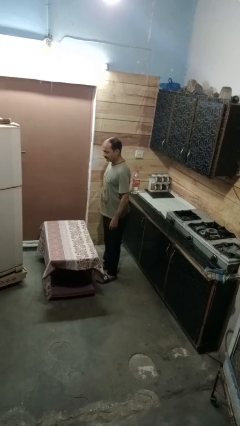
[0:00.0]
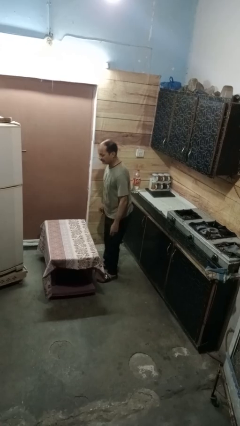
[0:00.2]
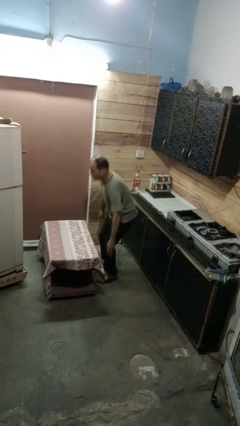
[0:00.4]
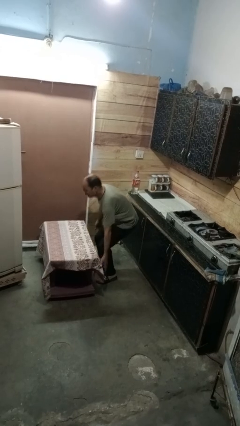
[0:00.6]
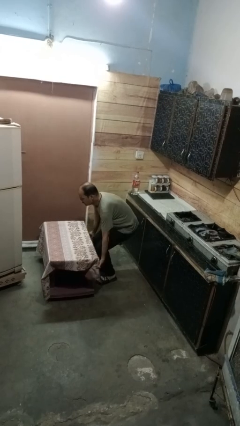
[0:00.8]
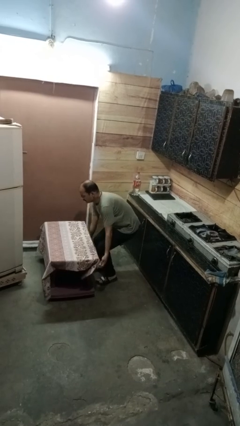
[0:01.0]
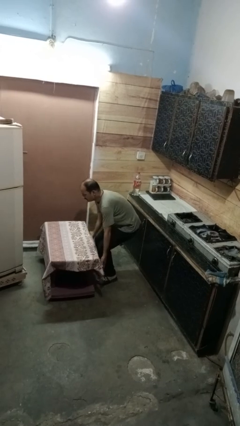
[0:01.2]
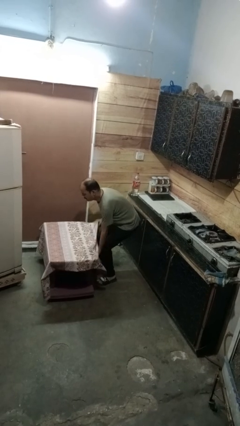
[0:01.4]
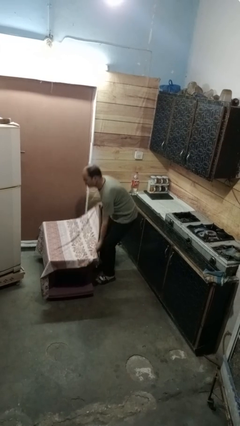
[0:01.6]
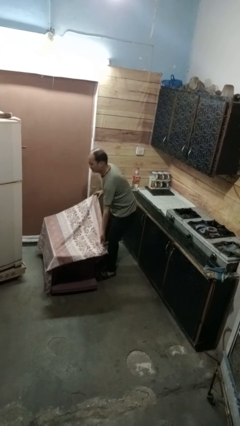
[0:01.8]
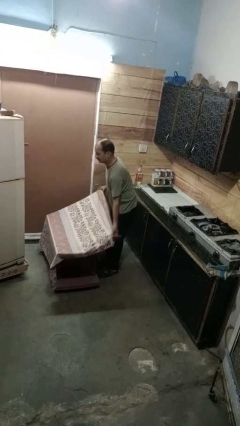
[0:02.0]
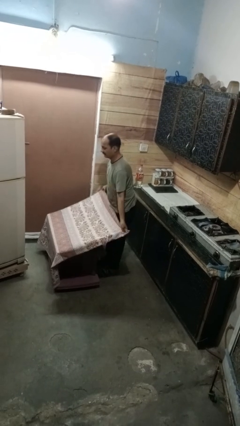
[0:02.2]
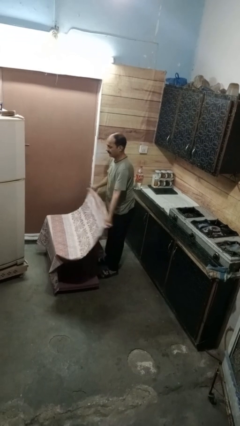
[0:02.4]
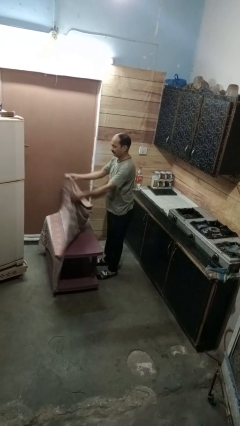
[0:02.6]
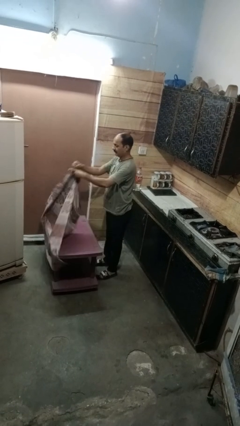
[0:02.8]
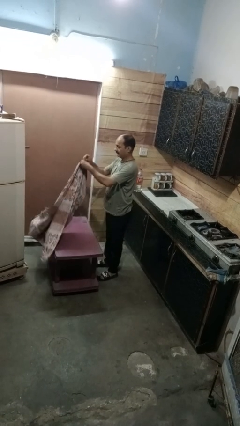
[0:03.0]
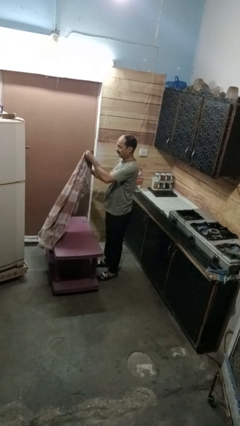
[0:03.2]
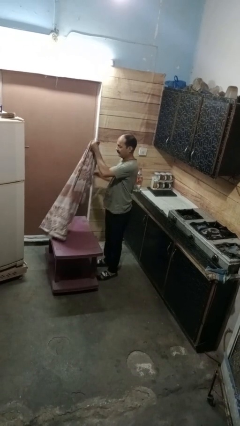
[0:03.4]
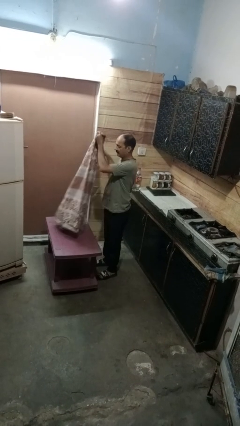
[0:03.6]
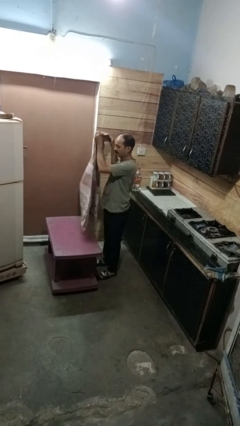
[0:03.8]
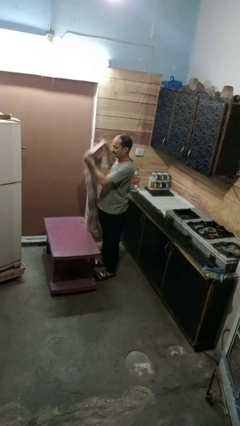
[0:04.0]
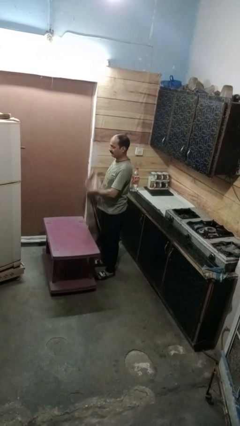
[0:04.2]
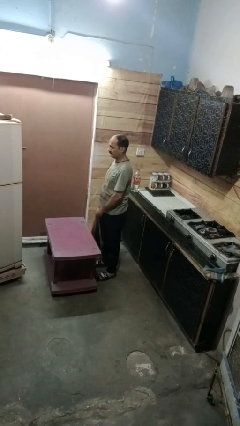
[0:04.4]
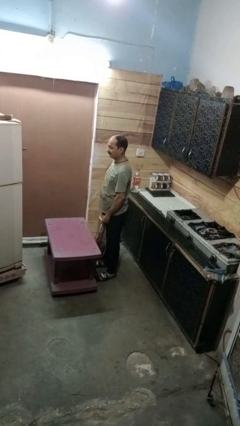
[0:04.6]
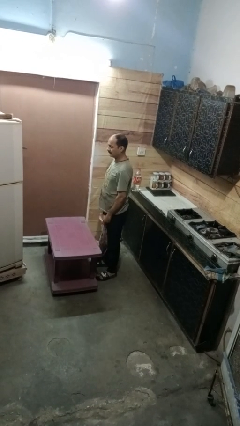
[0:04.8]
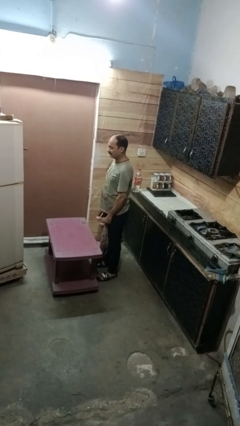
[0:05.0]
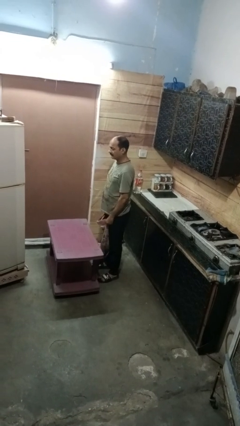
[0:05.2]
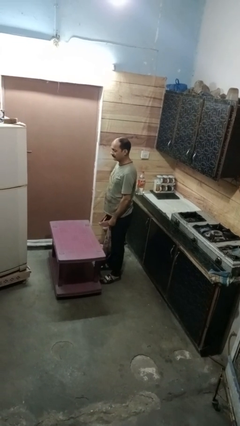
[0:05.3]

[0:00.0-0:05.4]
person folds tablecloth

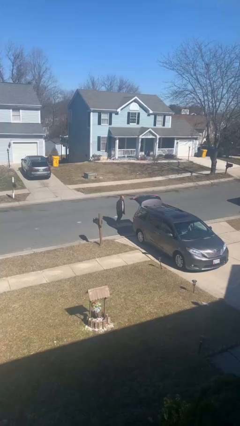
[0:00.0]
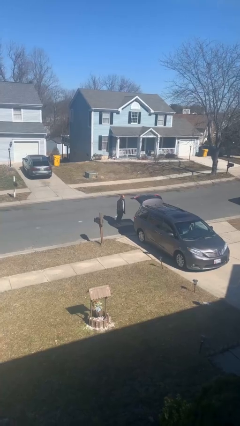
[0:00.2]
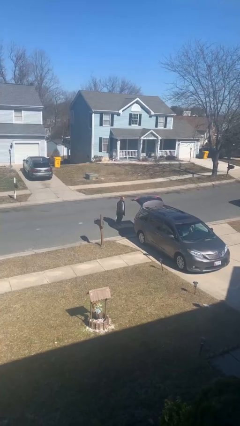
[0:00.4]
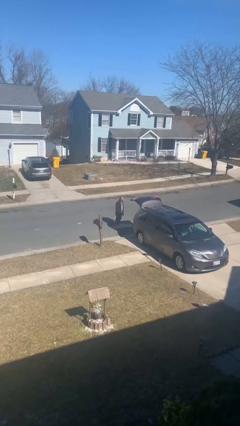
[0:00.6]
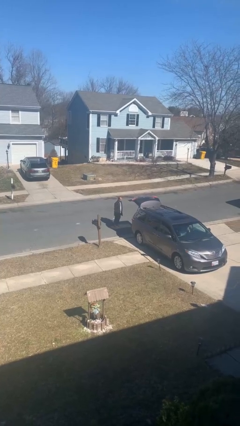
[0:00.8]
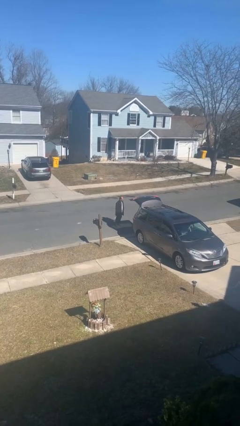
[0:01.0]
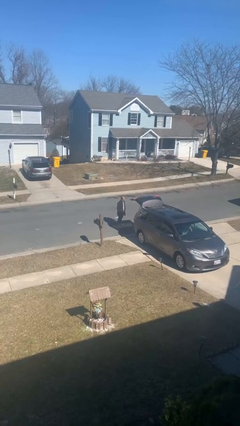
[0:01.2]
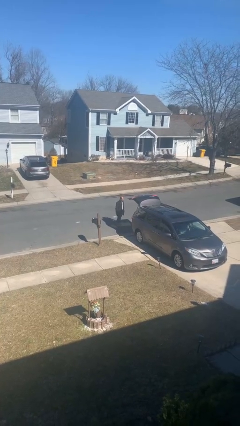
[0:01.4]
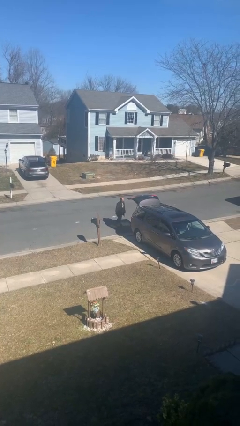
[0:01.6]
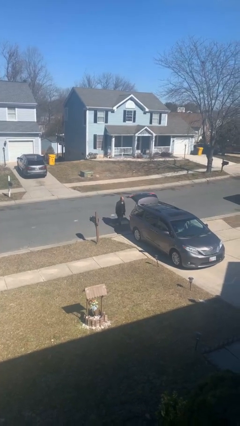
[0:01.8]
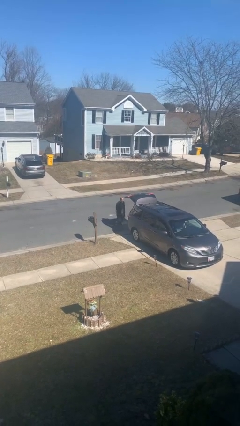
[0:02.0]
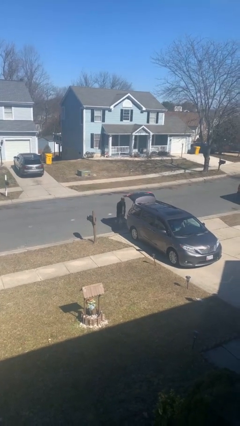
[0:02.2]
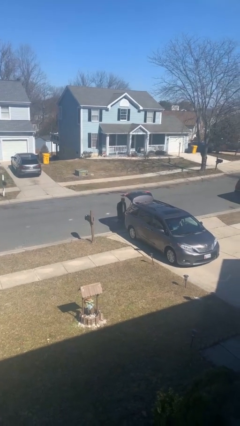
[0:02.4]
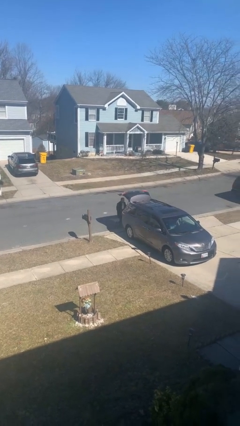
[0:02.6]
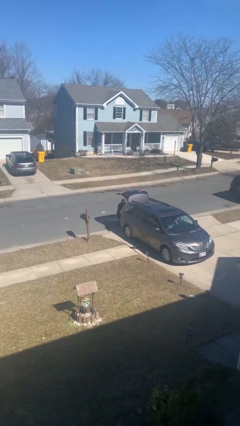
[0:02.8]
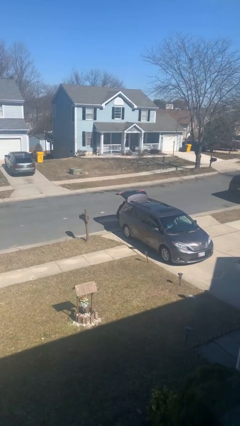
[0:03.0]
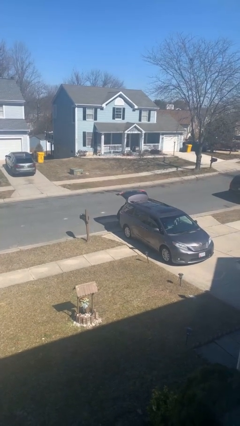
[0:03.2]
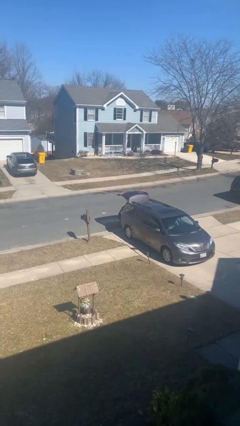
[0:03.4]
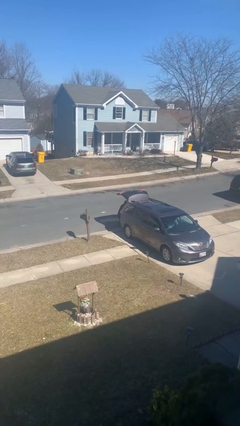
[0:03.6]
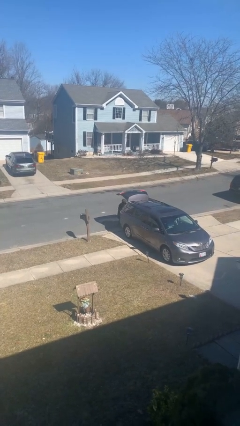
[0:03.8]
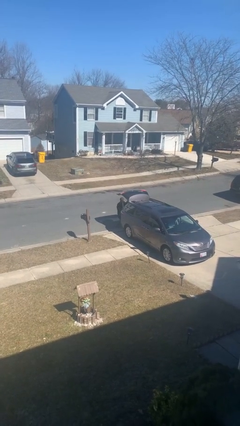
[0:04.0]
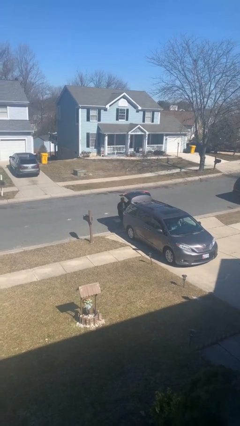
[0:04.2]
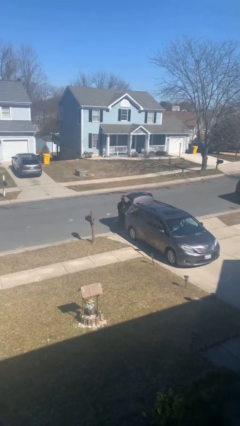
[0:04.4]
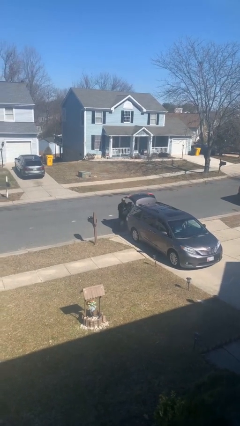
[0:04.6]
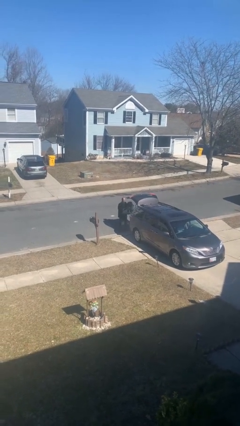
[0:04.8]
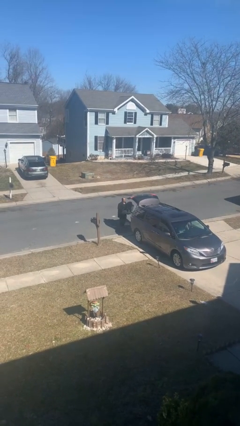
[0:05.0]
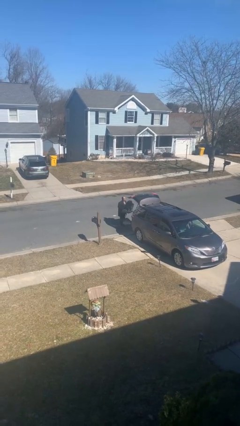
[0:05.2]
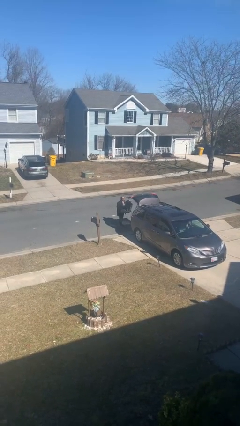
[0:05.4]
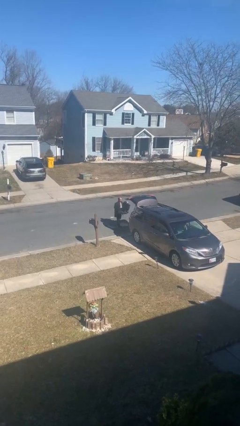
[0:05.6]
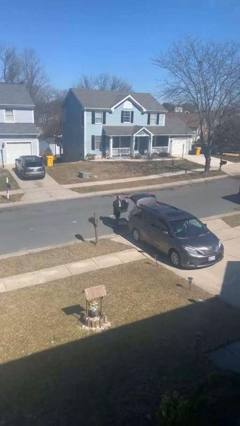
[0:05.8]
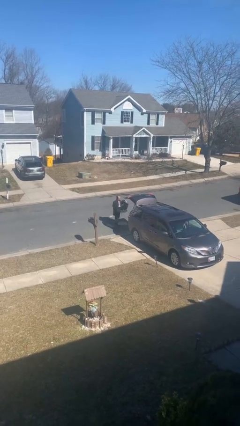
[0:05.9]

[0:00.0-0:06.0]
person unloads car

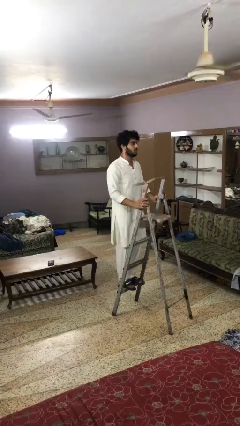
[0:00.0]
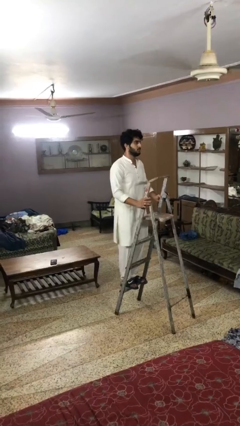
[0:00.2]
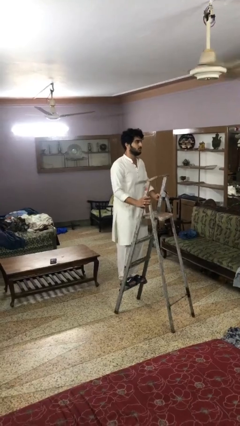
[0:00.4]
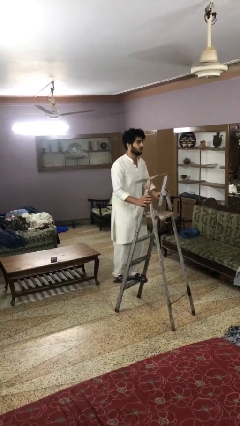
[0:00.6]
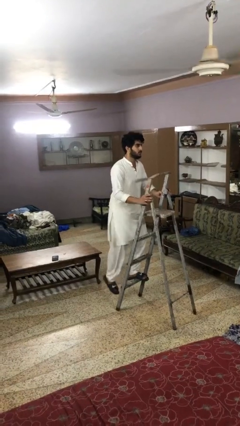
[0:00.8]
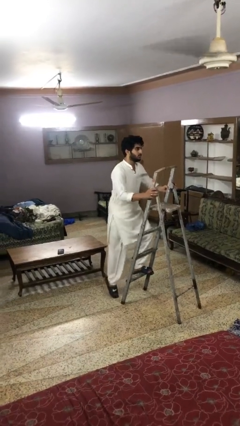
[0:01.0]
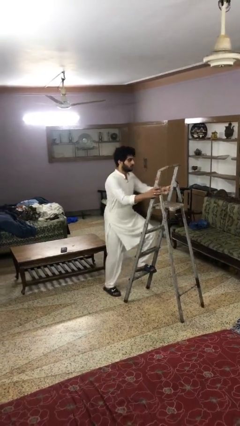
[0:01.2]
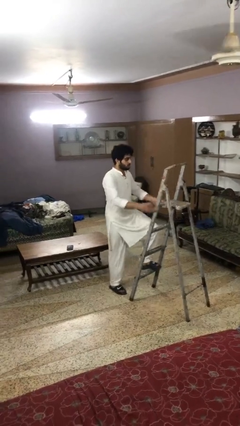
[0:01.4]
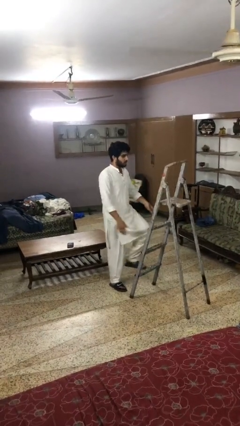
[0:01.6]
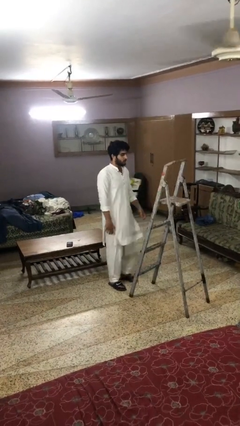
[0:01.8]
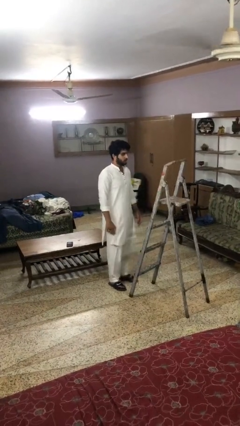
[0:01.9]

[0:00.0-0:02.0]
person climbs down ladder

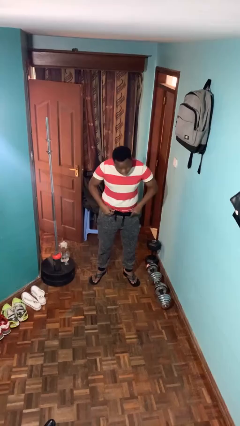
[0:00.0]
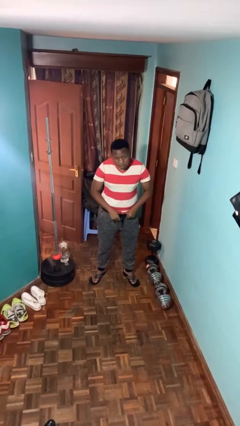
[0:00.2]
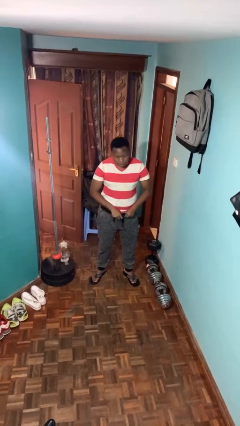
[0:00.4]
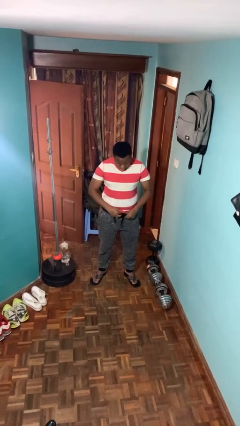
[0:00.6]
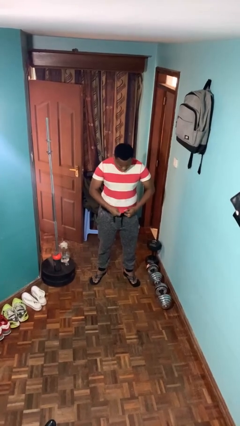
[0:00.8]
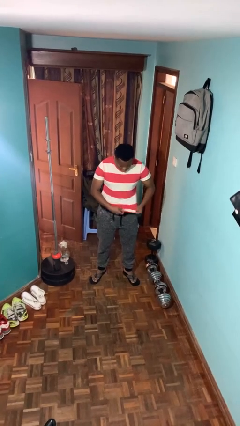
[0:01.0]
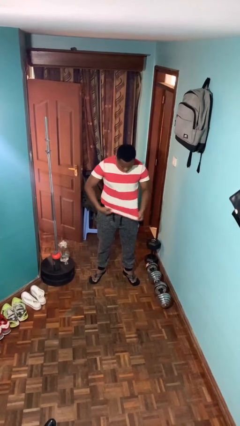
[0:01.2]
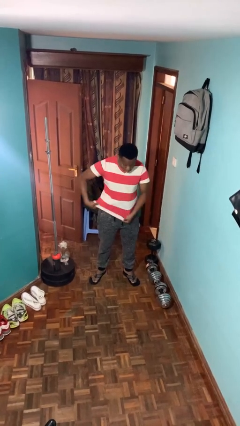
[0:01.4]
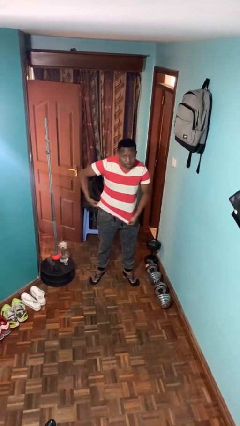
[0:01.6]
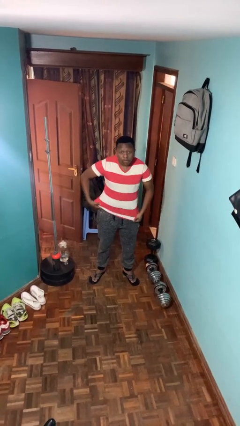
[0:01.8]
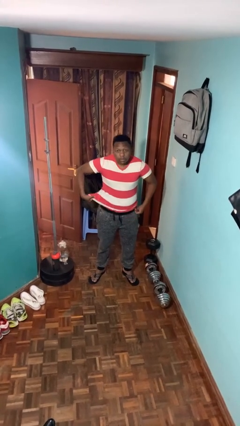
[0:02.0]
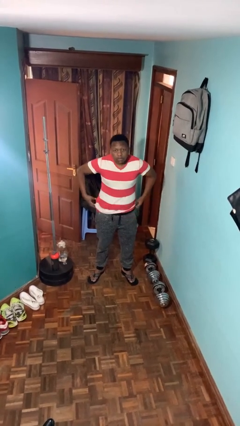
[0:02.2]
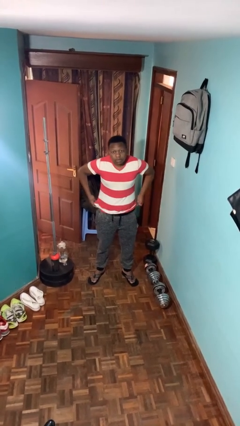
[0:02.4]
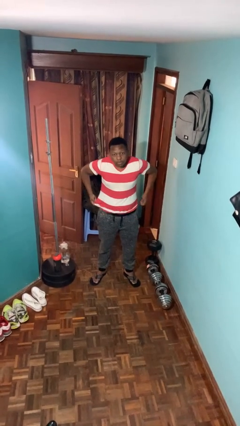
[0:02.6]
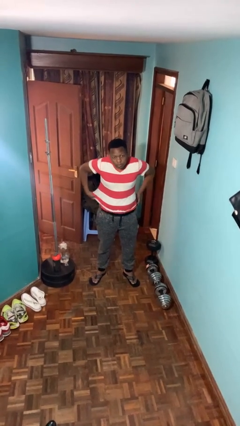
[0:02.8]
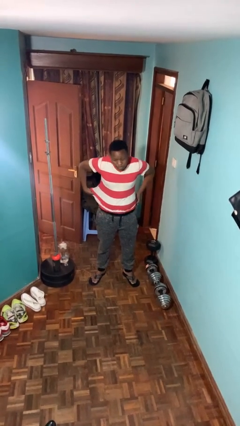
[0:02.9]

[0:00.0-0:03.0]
person untucks shirt

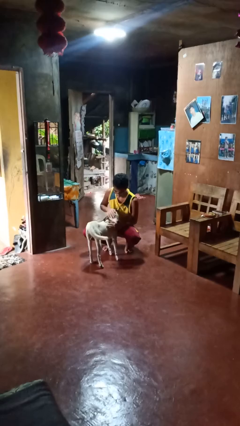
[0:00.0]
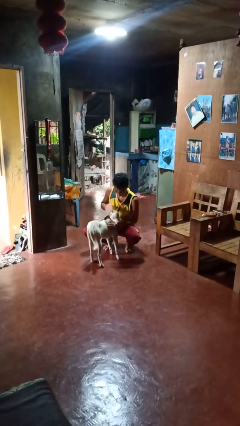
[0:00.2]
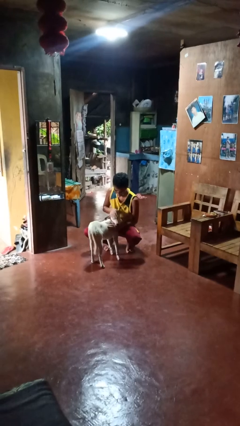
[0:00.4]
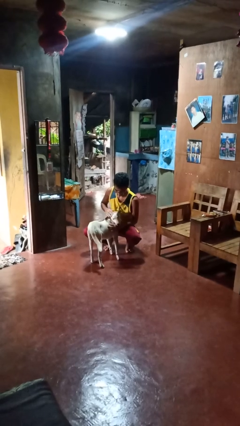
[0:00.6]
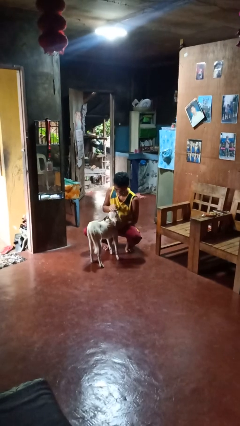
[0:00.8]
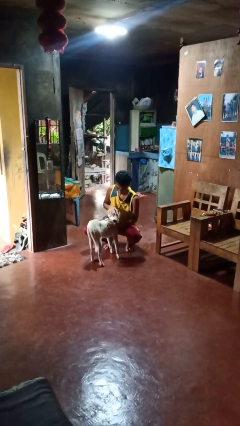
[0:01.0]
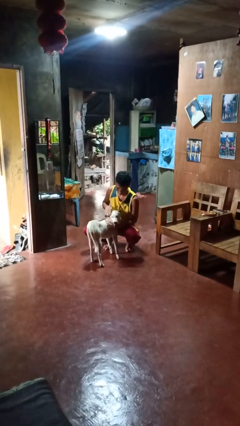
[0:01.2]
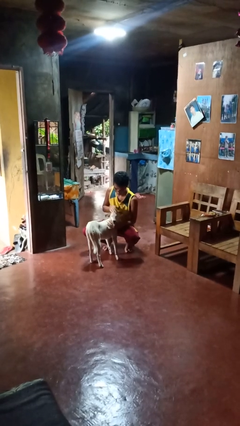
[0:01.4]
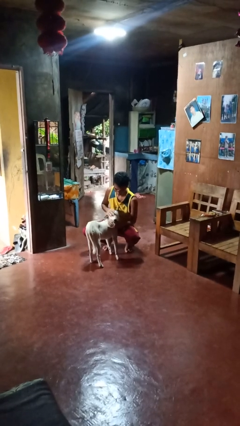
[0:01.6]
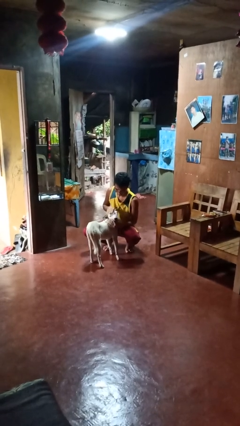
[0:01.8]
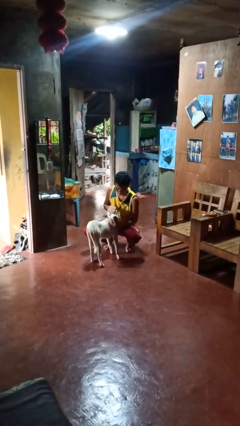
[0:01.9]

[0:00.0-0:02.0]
person pets dog
